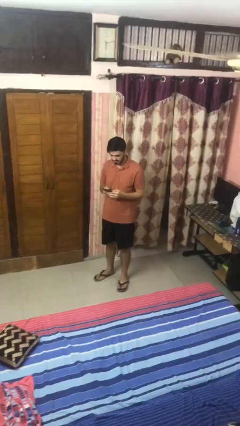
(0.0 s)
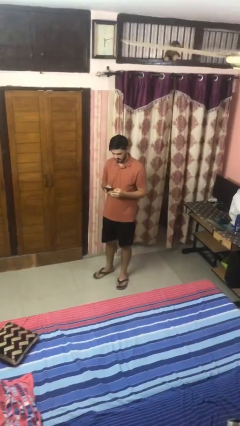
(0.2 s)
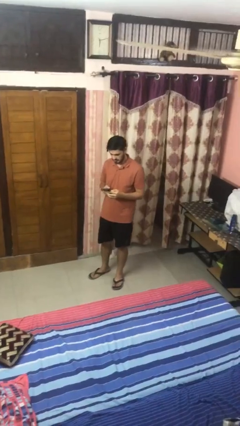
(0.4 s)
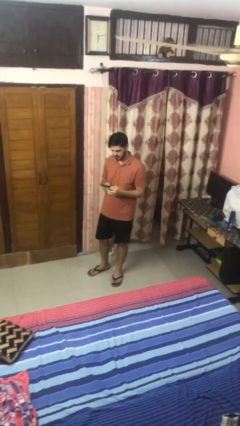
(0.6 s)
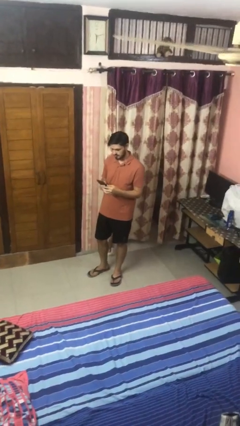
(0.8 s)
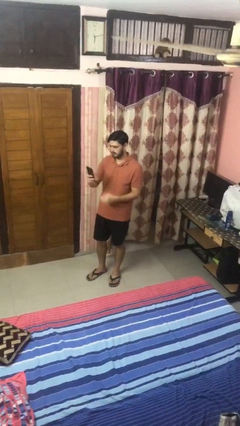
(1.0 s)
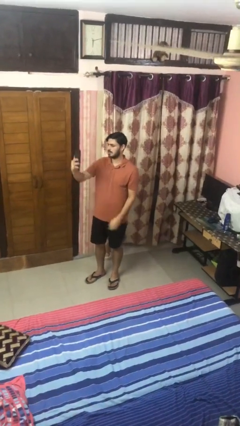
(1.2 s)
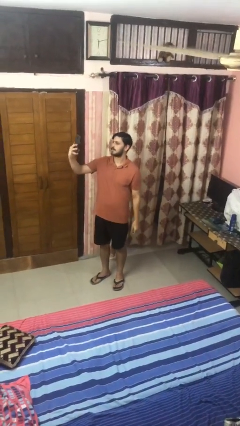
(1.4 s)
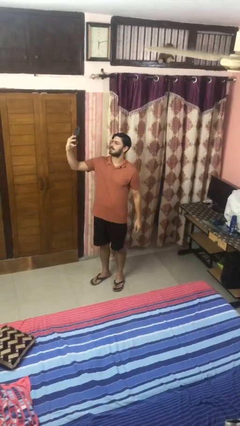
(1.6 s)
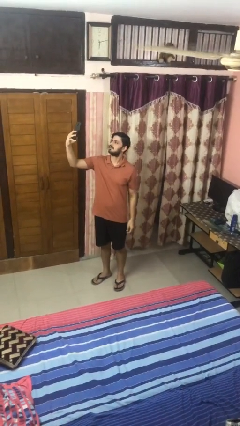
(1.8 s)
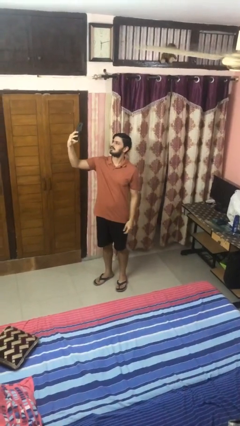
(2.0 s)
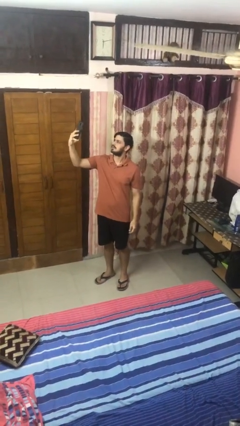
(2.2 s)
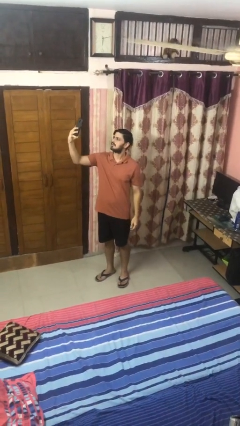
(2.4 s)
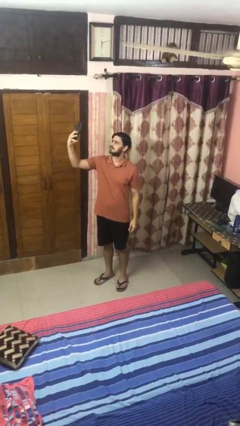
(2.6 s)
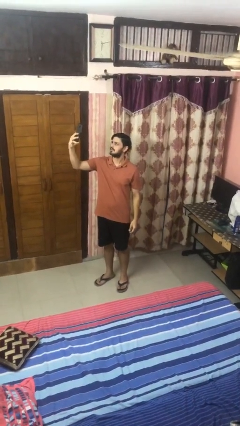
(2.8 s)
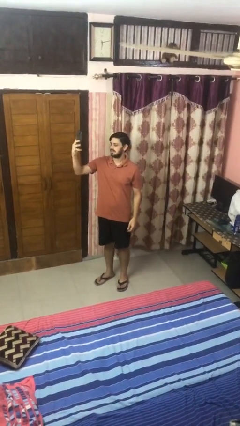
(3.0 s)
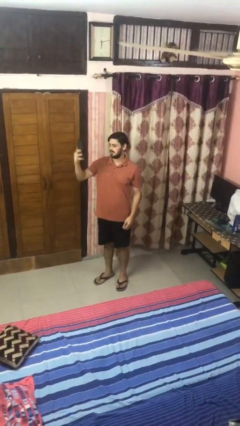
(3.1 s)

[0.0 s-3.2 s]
person takes selfie

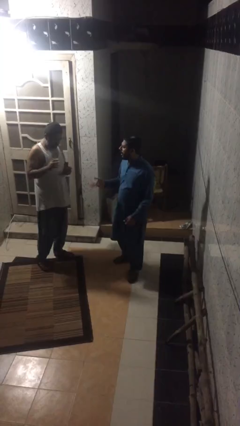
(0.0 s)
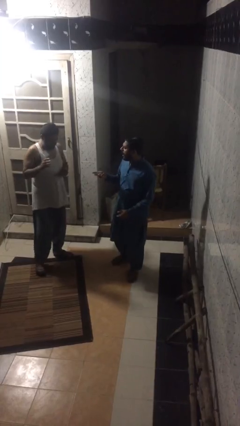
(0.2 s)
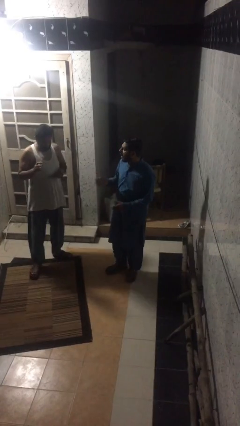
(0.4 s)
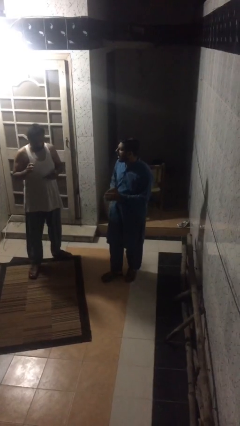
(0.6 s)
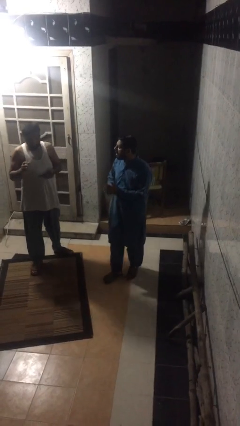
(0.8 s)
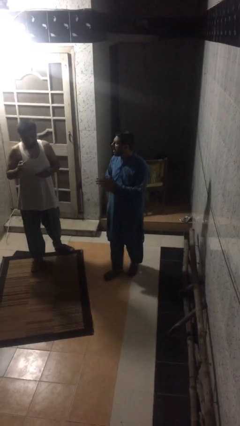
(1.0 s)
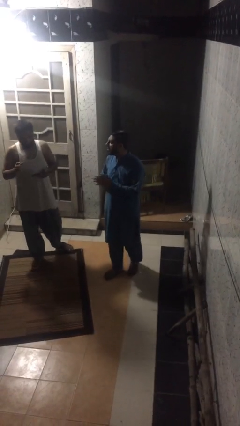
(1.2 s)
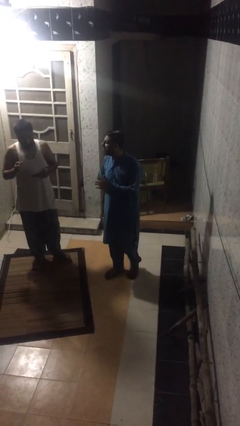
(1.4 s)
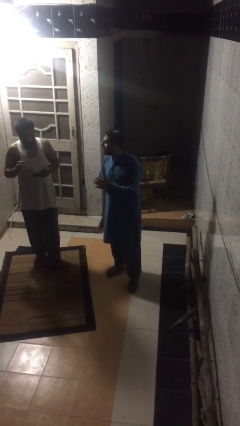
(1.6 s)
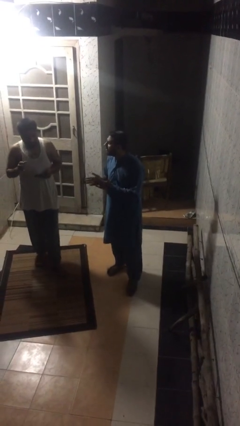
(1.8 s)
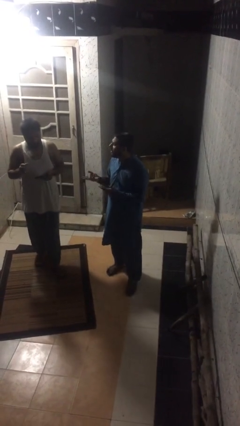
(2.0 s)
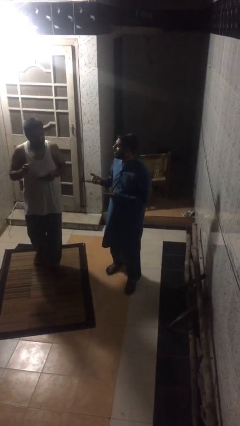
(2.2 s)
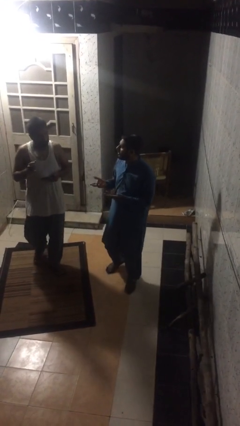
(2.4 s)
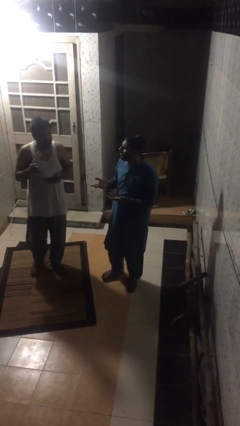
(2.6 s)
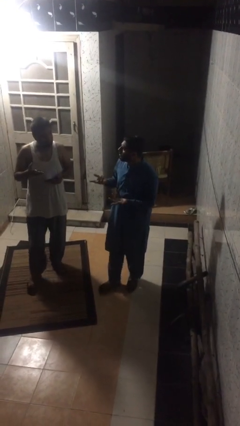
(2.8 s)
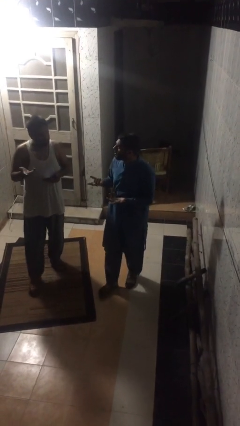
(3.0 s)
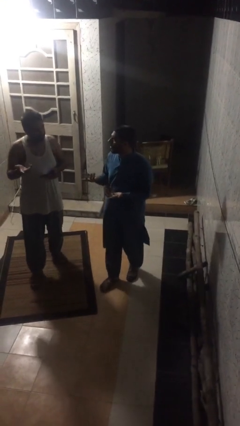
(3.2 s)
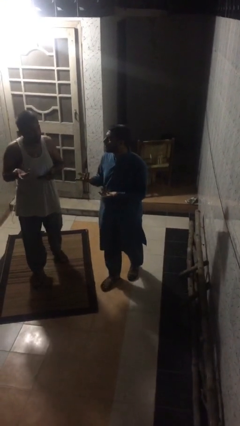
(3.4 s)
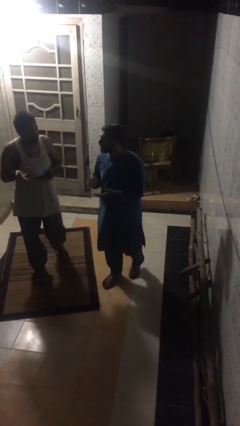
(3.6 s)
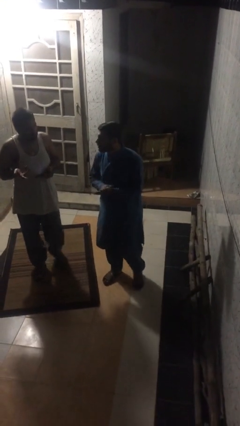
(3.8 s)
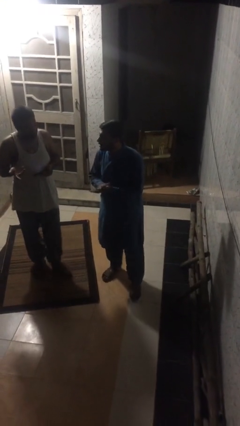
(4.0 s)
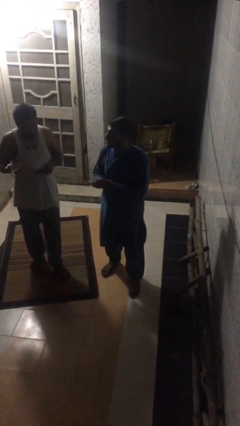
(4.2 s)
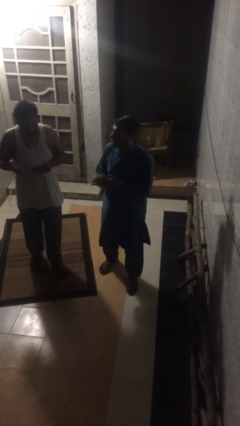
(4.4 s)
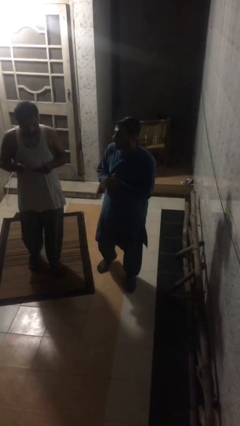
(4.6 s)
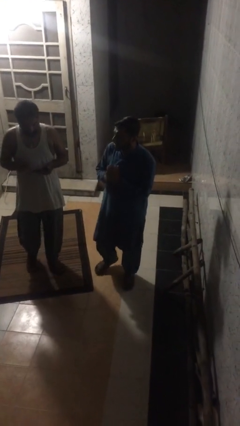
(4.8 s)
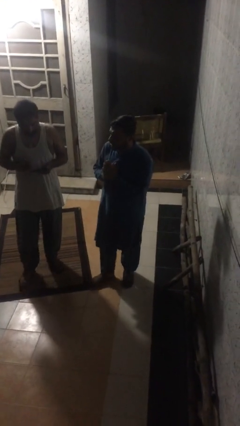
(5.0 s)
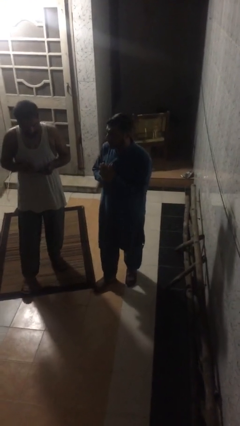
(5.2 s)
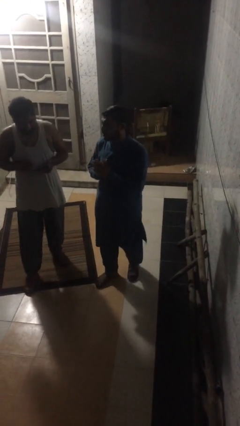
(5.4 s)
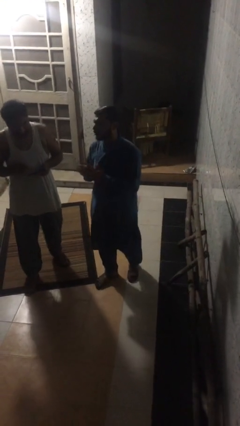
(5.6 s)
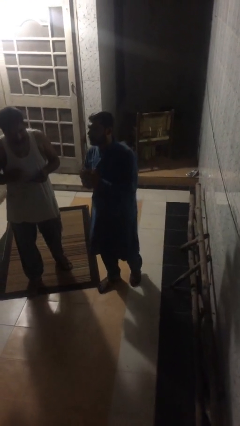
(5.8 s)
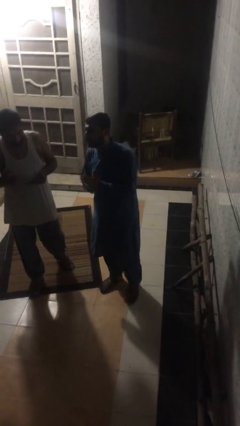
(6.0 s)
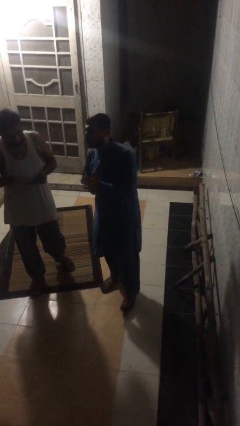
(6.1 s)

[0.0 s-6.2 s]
person talks to person

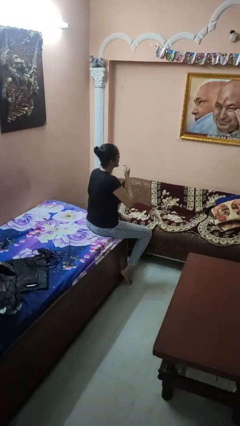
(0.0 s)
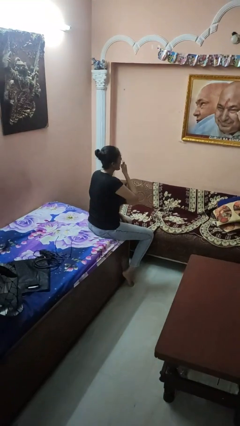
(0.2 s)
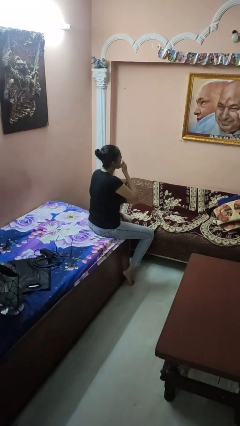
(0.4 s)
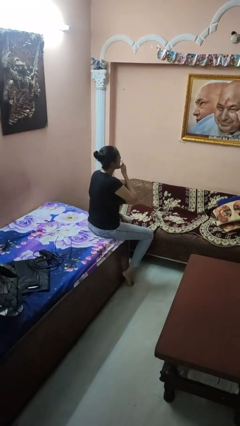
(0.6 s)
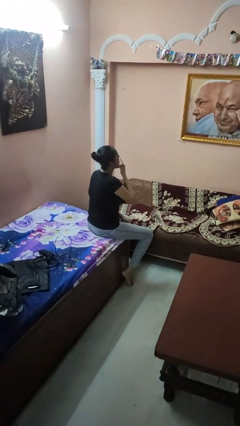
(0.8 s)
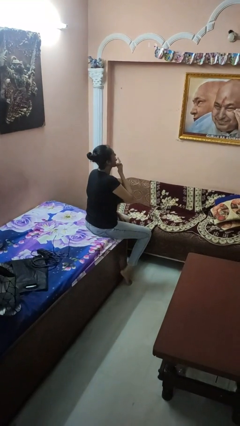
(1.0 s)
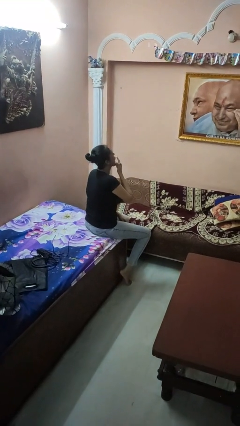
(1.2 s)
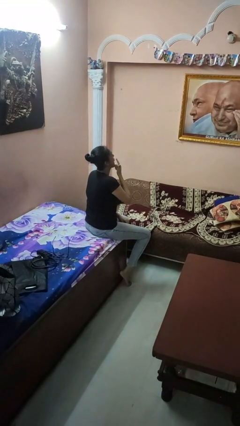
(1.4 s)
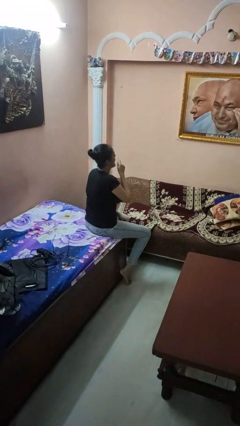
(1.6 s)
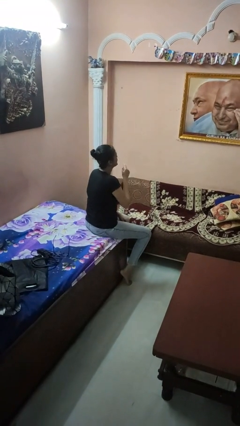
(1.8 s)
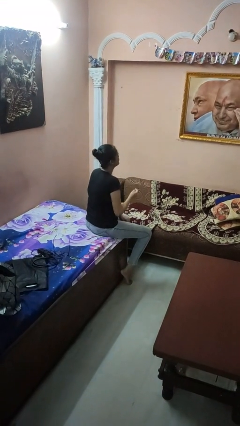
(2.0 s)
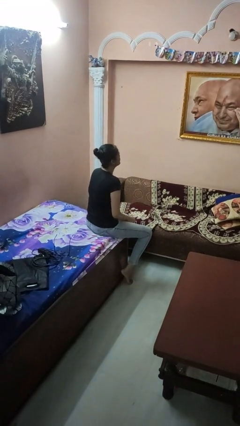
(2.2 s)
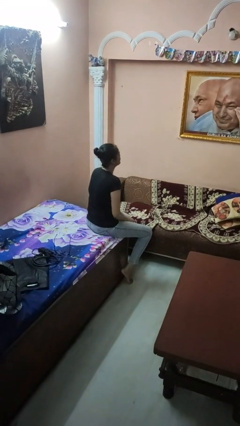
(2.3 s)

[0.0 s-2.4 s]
person licks fingers

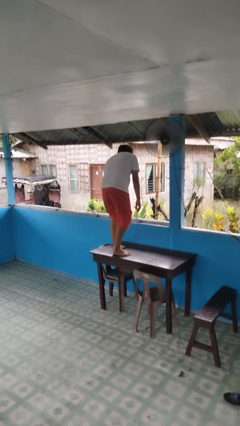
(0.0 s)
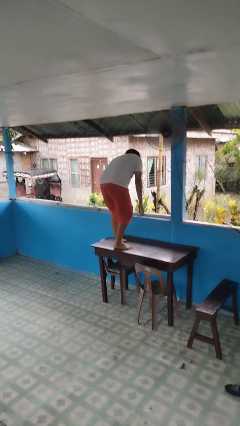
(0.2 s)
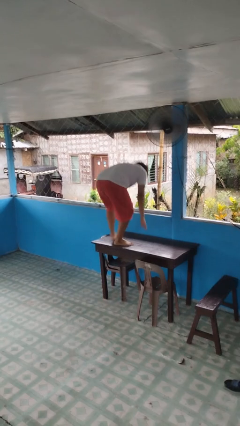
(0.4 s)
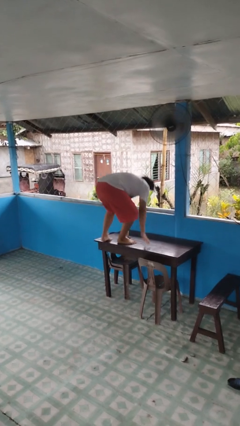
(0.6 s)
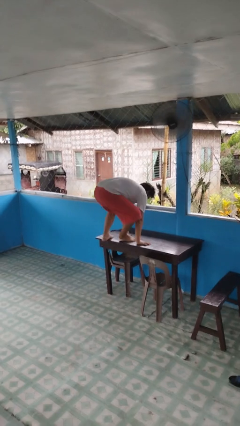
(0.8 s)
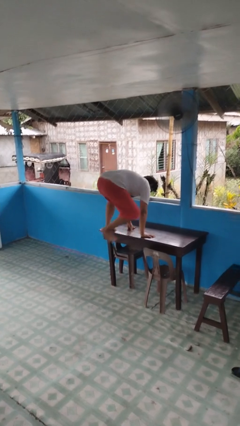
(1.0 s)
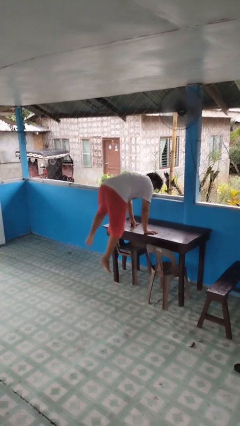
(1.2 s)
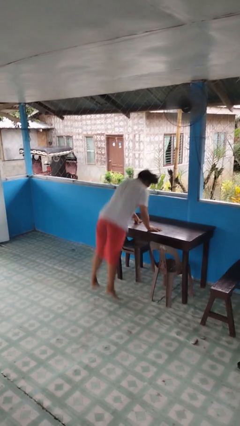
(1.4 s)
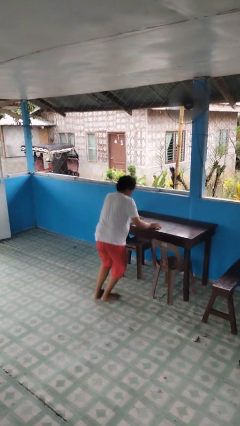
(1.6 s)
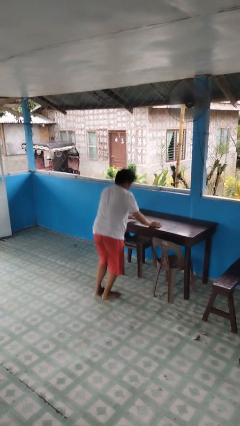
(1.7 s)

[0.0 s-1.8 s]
person climbs off table

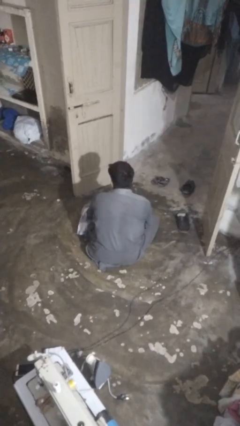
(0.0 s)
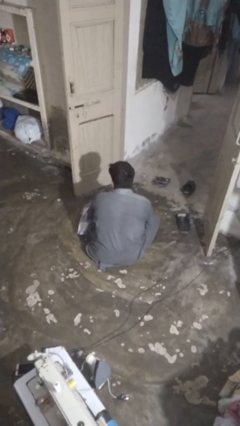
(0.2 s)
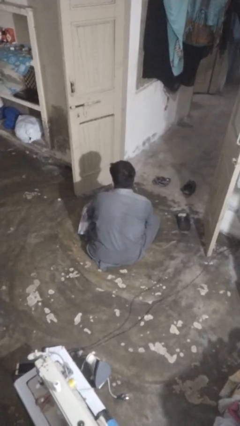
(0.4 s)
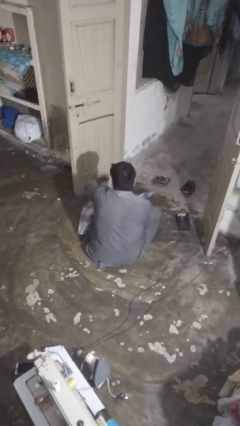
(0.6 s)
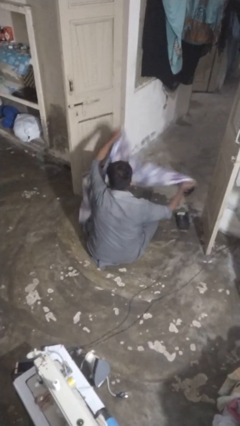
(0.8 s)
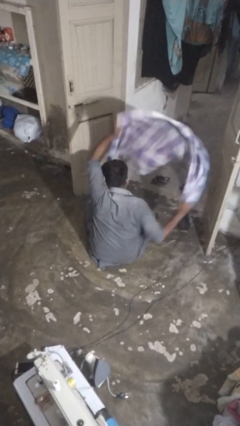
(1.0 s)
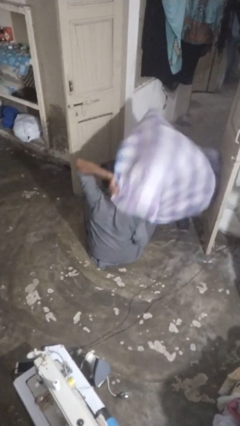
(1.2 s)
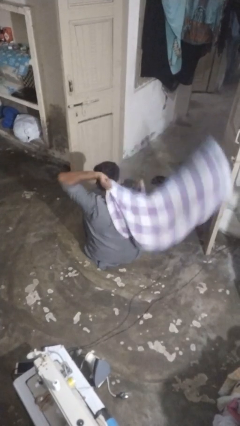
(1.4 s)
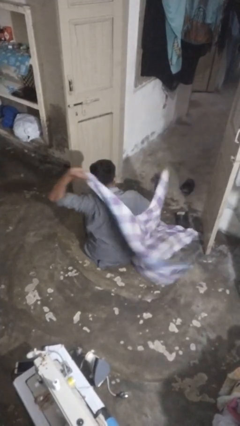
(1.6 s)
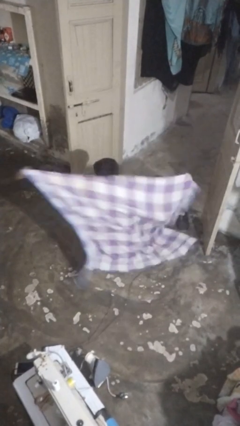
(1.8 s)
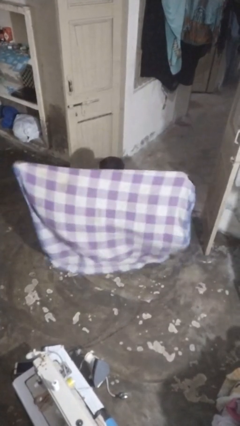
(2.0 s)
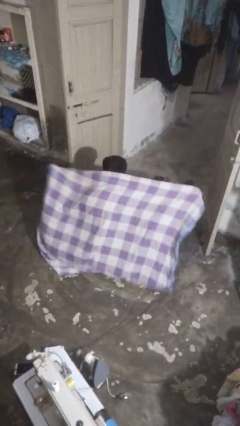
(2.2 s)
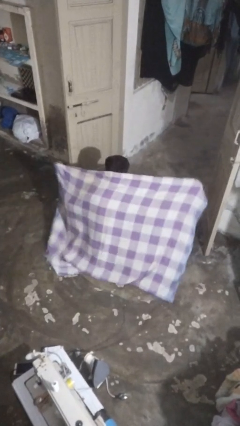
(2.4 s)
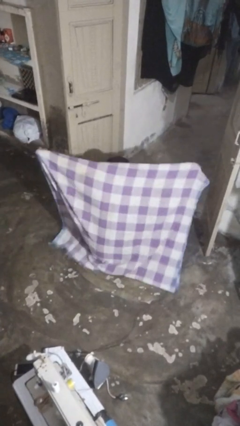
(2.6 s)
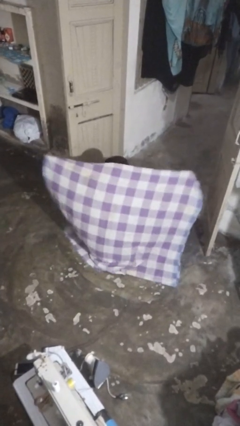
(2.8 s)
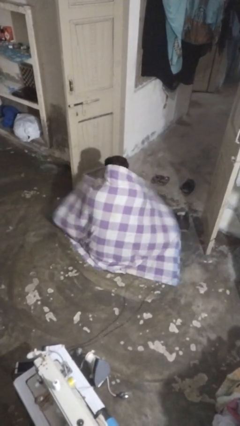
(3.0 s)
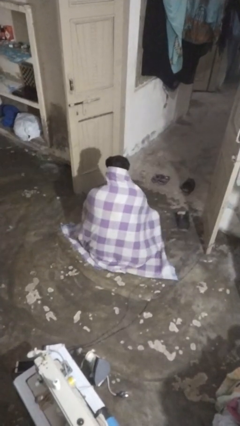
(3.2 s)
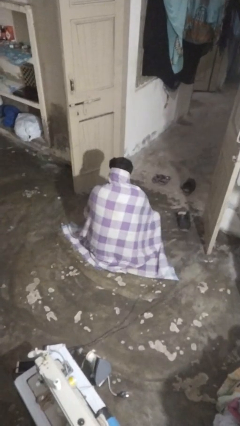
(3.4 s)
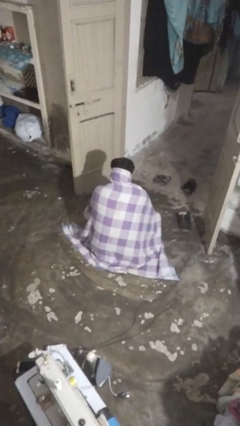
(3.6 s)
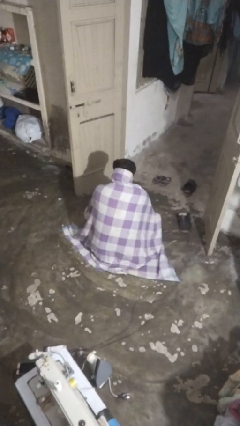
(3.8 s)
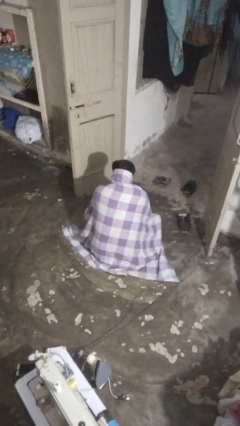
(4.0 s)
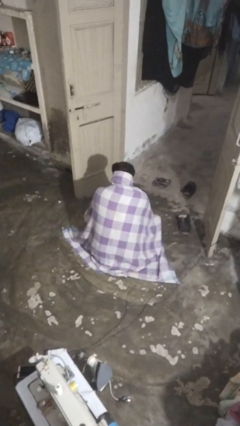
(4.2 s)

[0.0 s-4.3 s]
person covers with blanket
